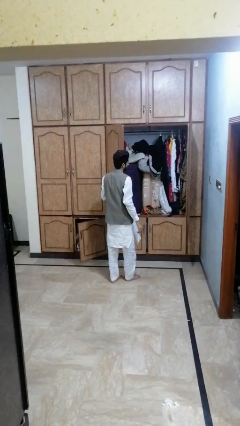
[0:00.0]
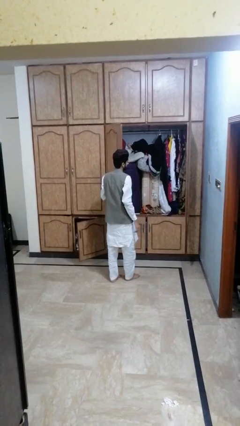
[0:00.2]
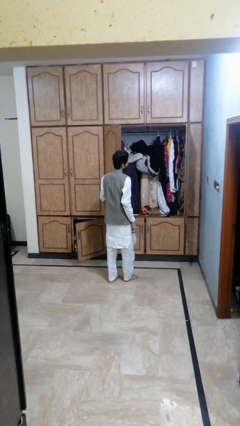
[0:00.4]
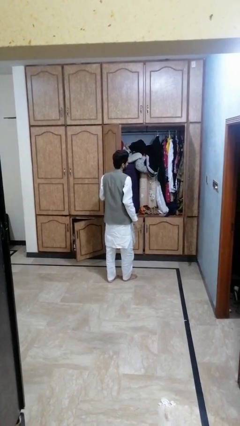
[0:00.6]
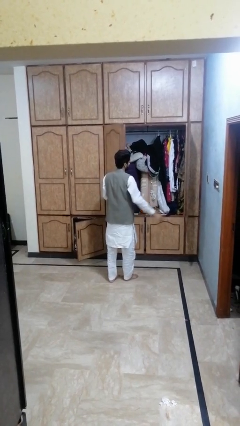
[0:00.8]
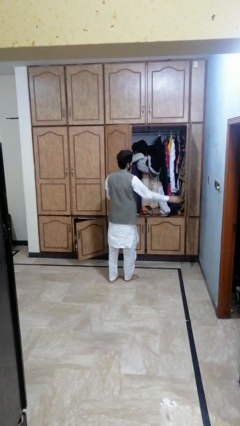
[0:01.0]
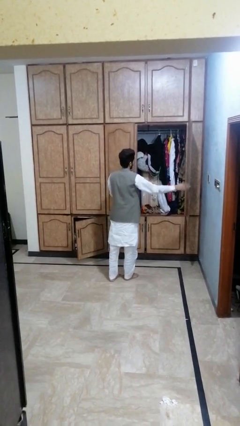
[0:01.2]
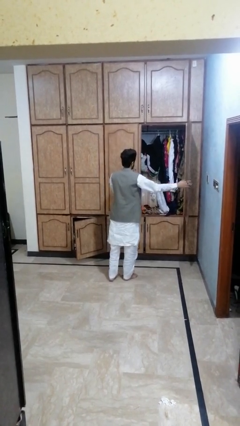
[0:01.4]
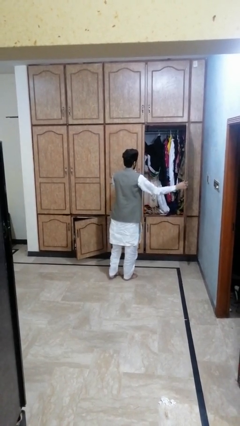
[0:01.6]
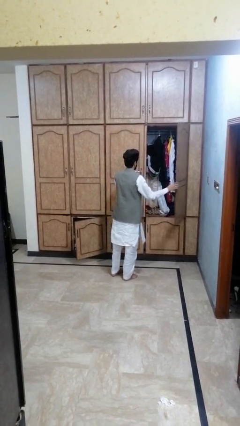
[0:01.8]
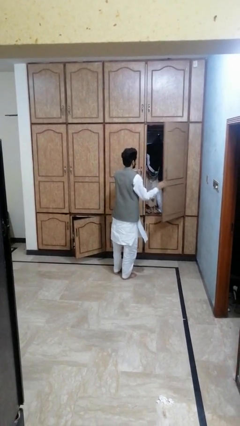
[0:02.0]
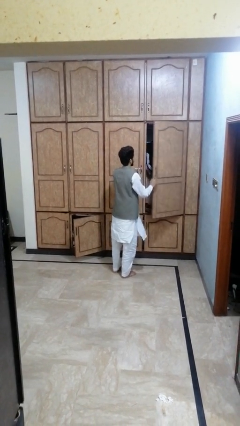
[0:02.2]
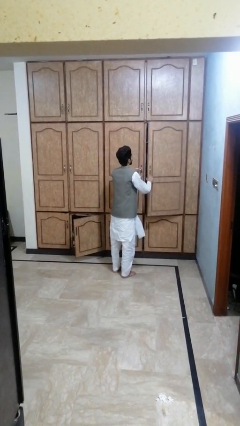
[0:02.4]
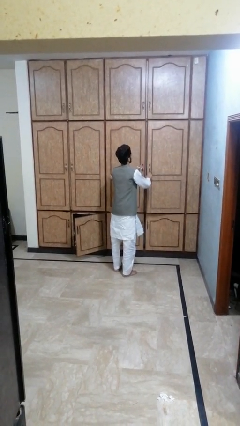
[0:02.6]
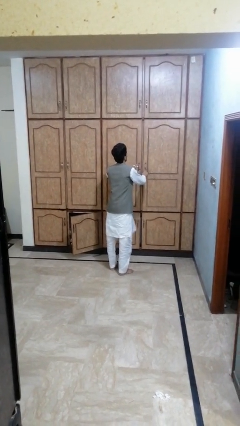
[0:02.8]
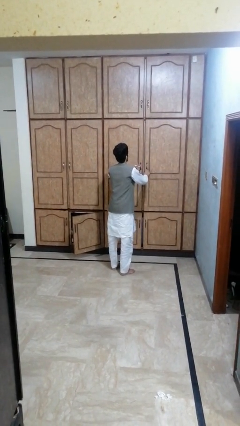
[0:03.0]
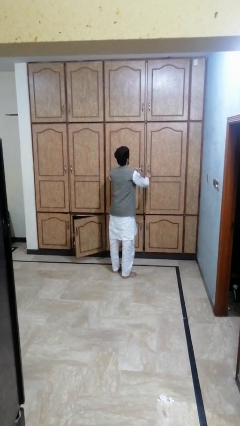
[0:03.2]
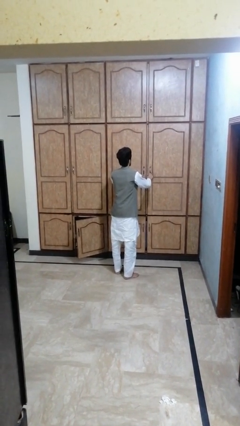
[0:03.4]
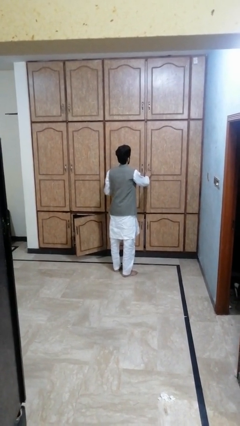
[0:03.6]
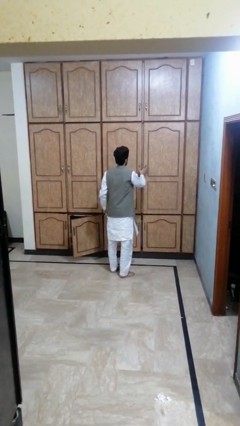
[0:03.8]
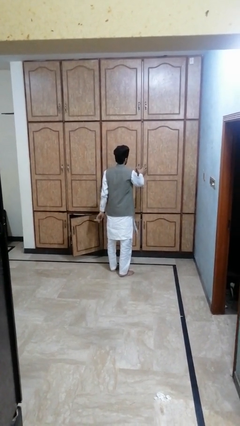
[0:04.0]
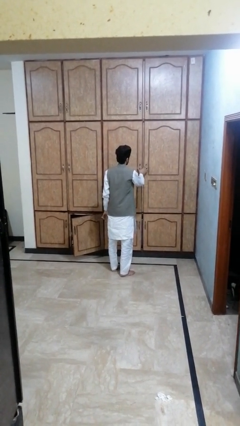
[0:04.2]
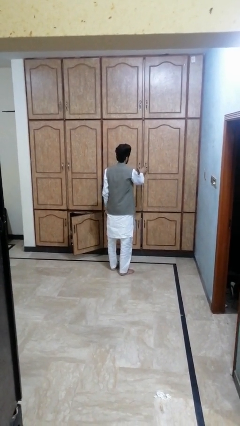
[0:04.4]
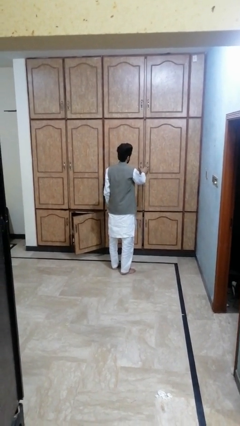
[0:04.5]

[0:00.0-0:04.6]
person closes dresser drawer

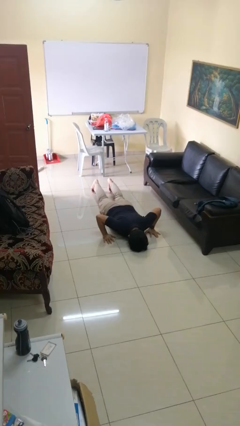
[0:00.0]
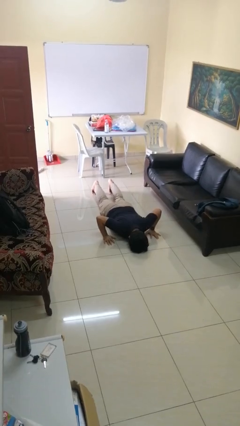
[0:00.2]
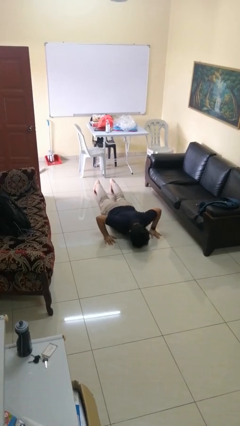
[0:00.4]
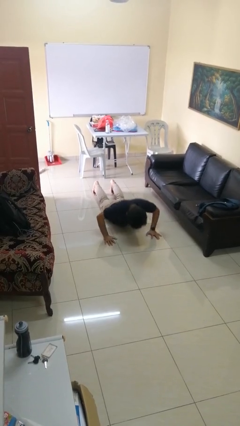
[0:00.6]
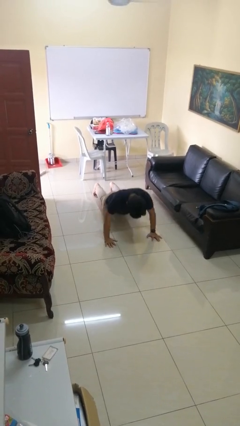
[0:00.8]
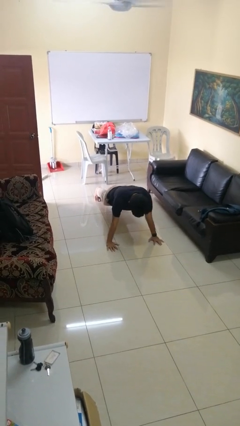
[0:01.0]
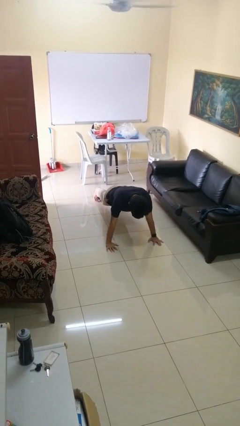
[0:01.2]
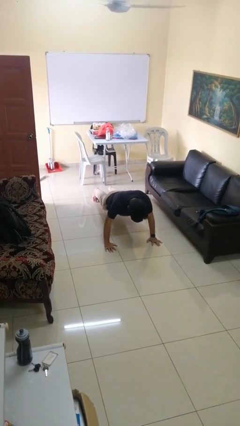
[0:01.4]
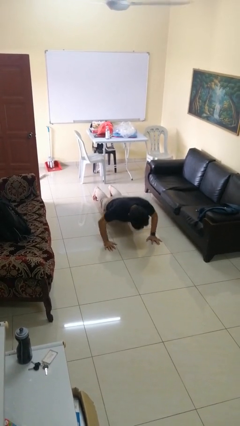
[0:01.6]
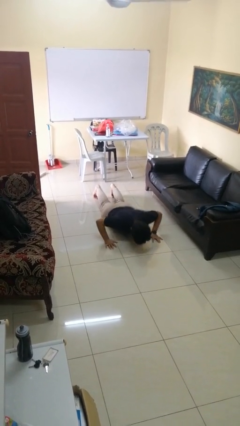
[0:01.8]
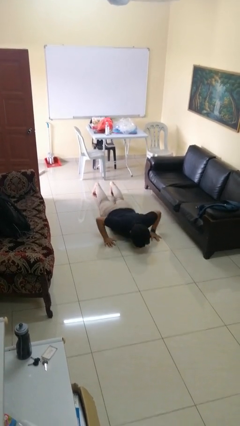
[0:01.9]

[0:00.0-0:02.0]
person exercises with pushup

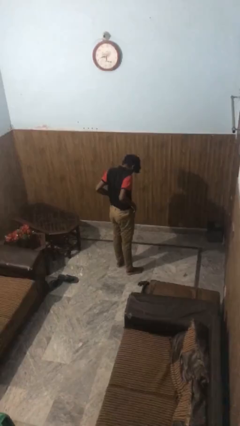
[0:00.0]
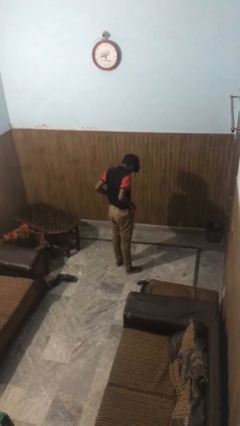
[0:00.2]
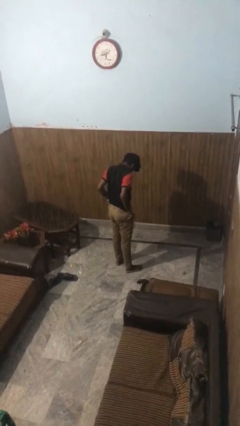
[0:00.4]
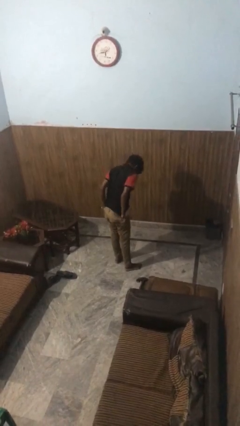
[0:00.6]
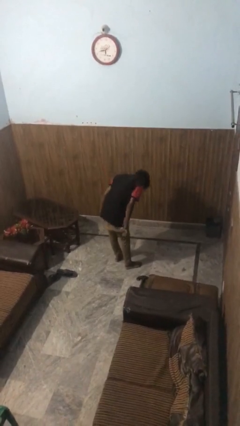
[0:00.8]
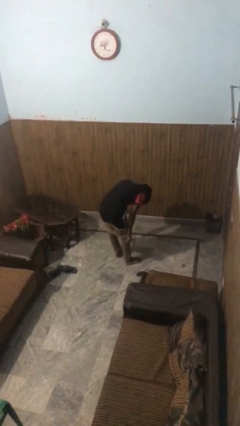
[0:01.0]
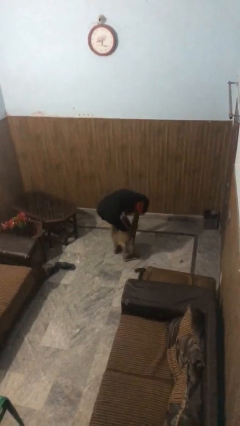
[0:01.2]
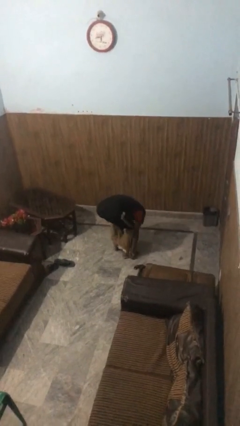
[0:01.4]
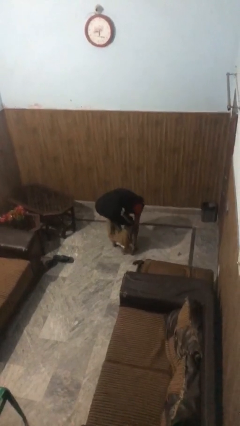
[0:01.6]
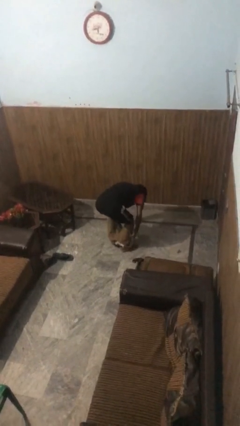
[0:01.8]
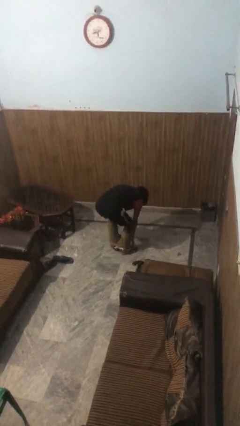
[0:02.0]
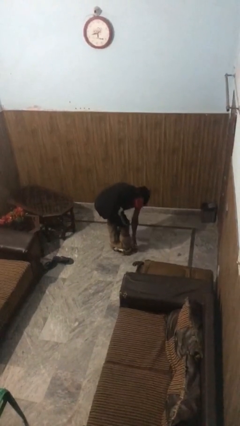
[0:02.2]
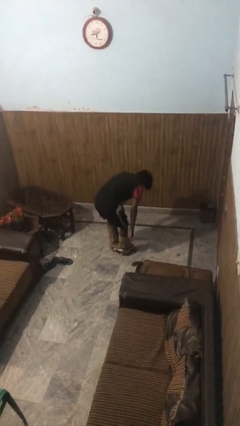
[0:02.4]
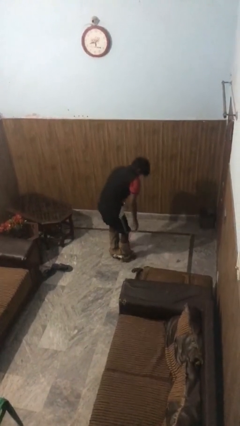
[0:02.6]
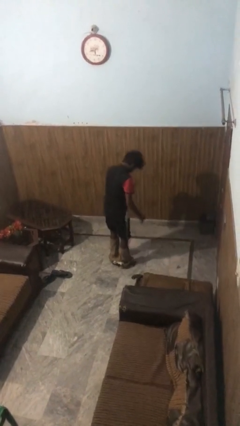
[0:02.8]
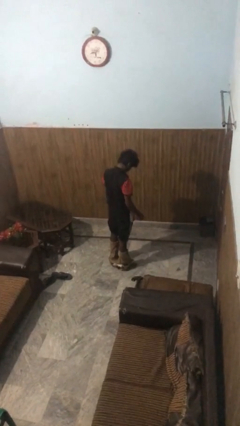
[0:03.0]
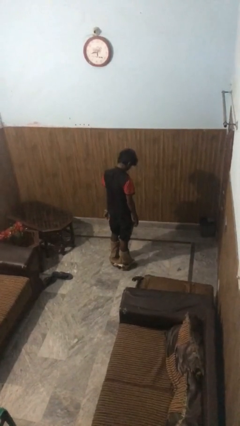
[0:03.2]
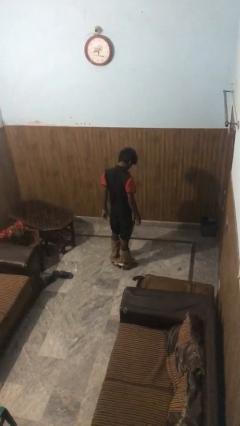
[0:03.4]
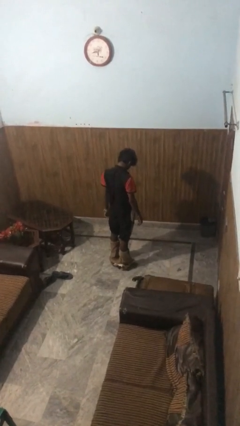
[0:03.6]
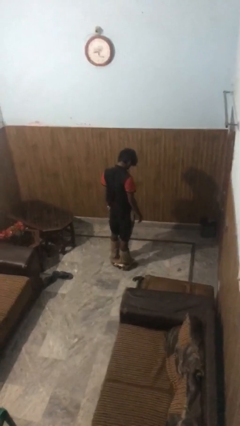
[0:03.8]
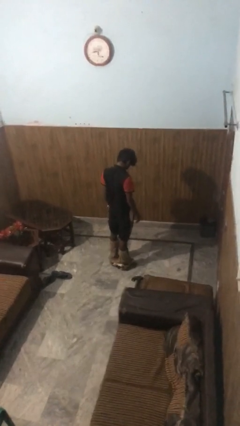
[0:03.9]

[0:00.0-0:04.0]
person takes off pants

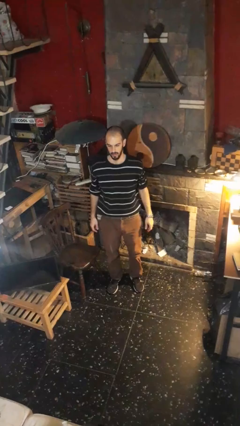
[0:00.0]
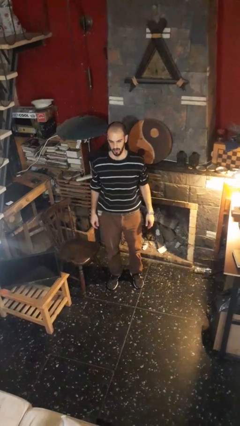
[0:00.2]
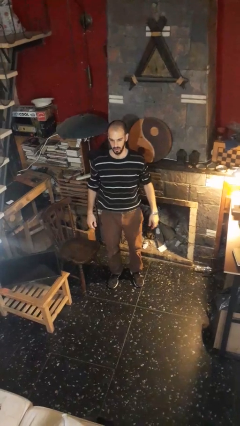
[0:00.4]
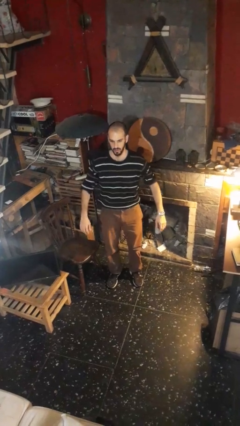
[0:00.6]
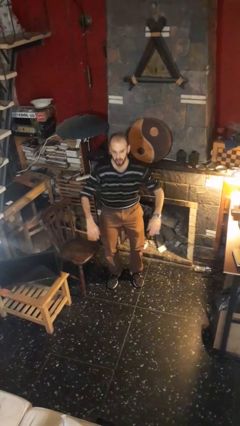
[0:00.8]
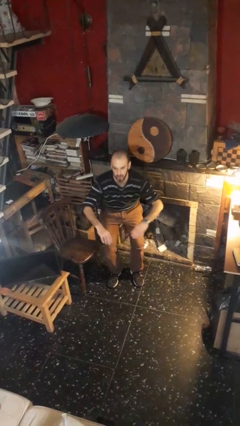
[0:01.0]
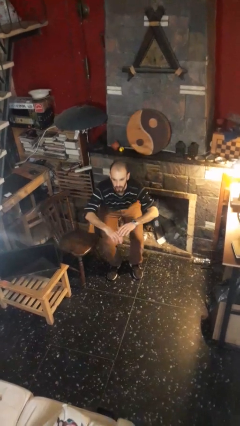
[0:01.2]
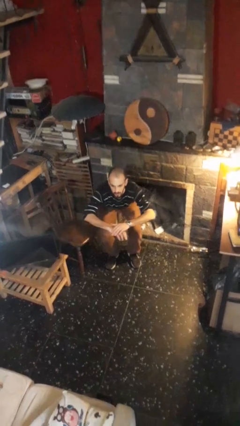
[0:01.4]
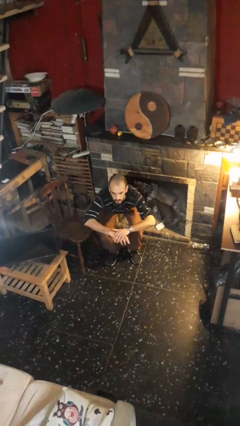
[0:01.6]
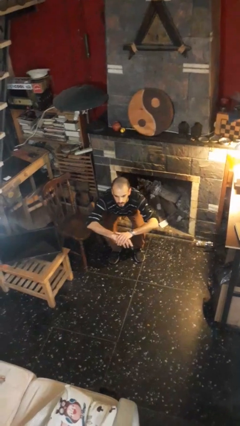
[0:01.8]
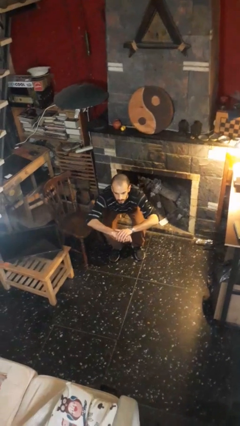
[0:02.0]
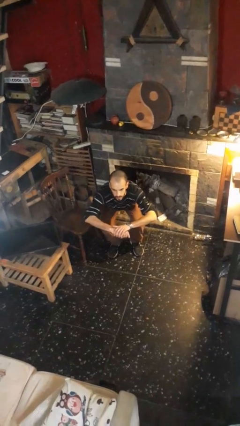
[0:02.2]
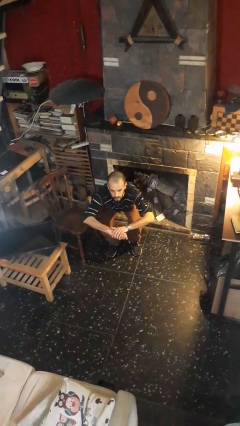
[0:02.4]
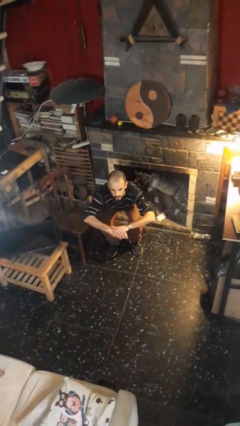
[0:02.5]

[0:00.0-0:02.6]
person squats

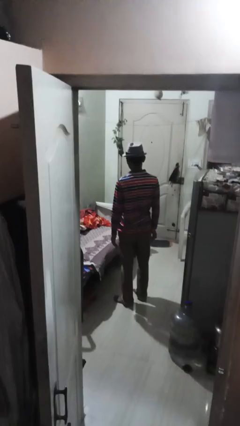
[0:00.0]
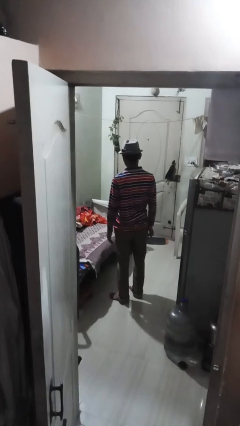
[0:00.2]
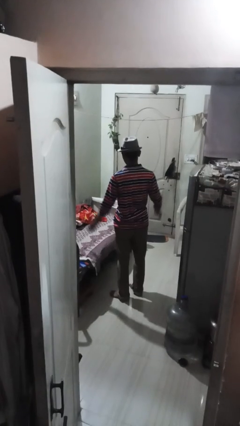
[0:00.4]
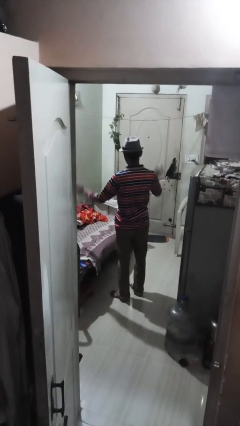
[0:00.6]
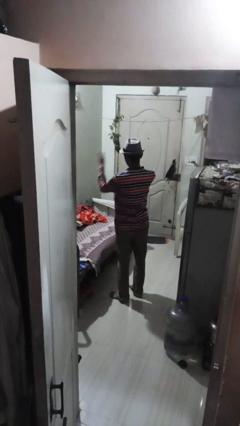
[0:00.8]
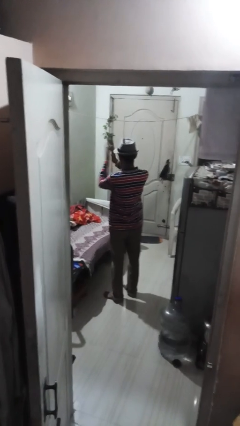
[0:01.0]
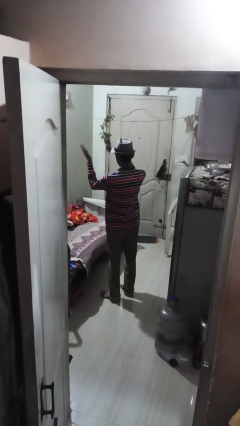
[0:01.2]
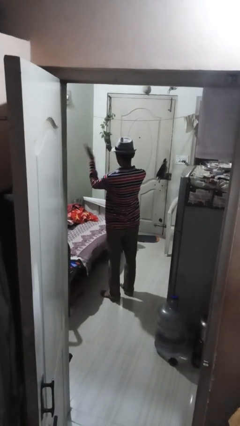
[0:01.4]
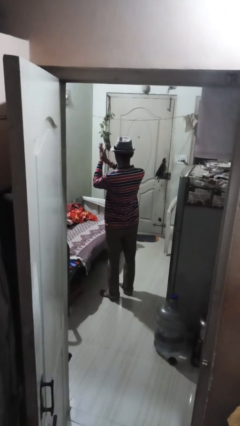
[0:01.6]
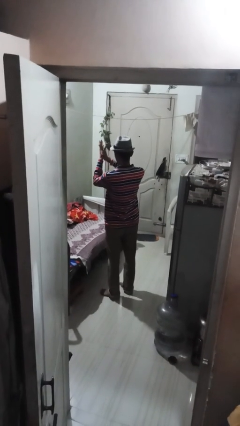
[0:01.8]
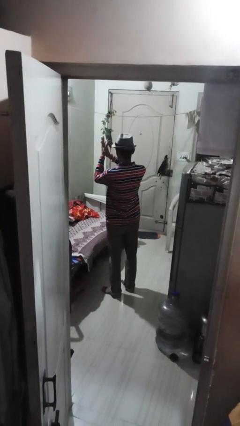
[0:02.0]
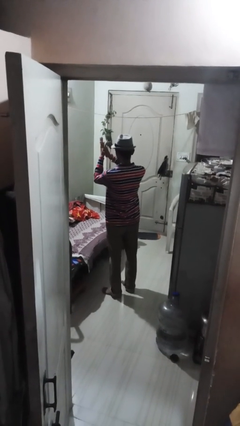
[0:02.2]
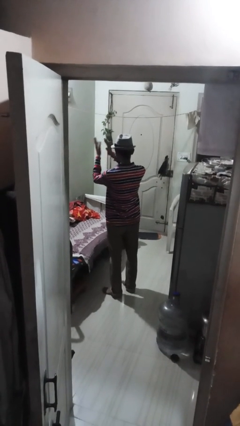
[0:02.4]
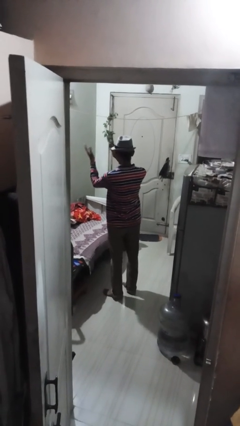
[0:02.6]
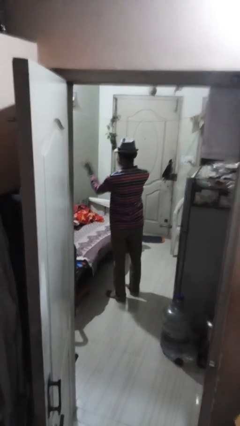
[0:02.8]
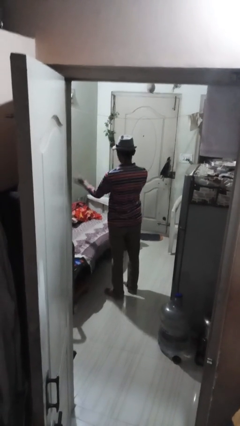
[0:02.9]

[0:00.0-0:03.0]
person claps hands

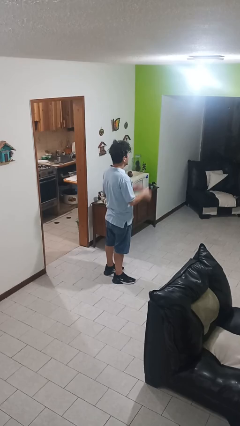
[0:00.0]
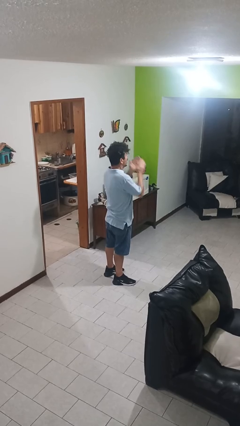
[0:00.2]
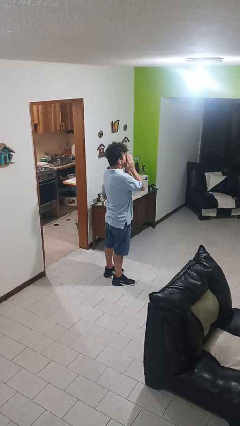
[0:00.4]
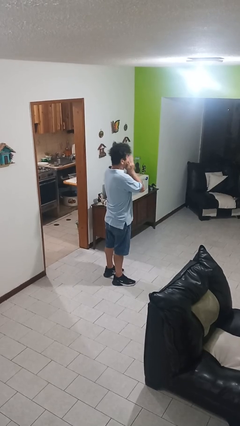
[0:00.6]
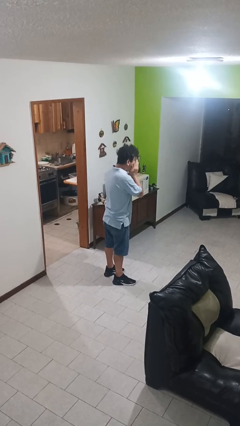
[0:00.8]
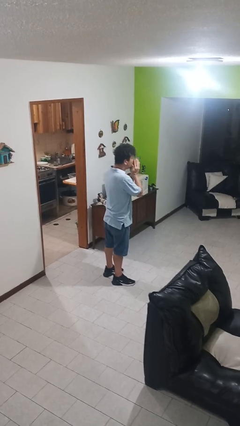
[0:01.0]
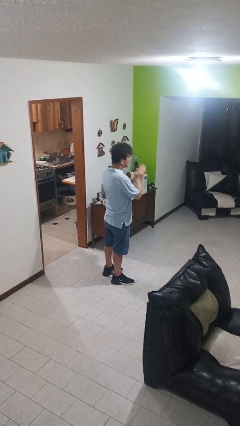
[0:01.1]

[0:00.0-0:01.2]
person sneezes into hand
